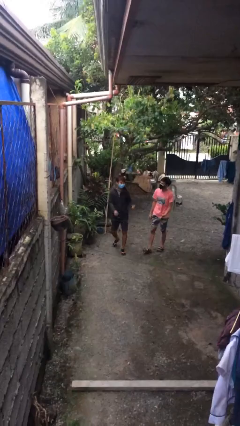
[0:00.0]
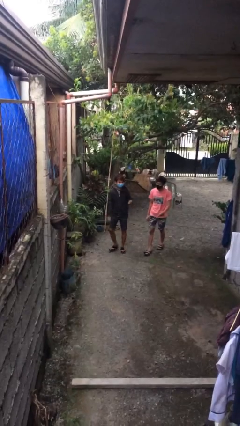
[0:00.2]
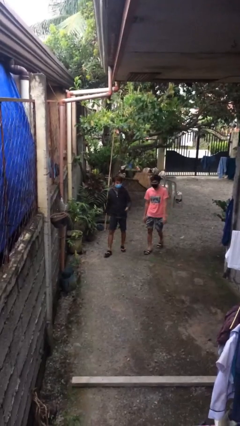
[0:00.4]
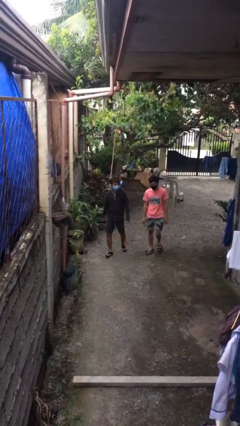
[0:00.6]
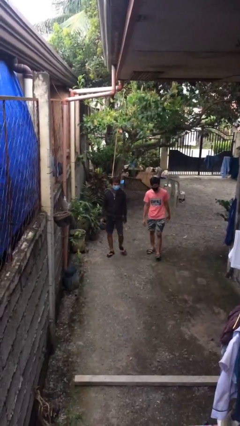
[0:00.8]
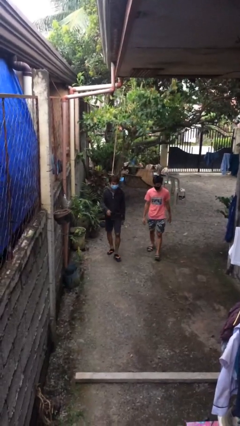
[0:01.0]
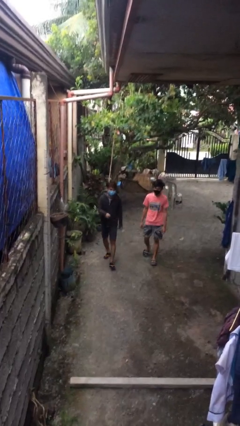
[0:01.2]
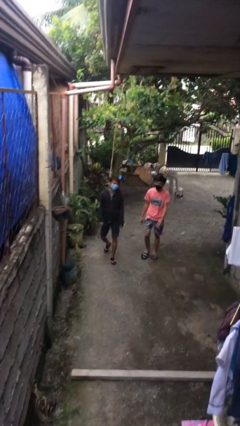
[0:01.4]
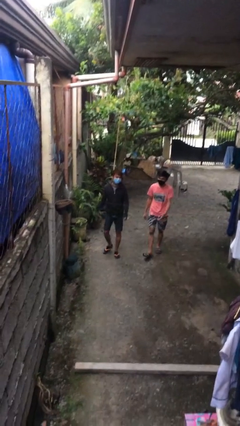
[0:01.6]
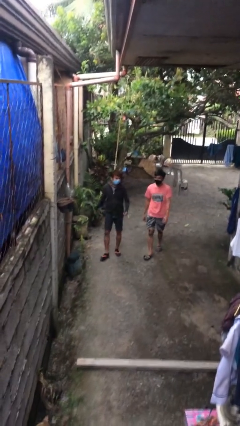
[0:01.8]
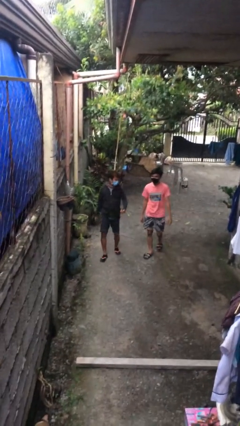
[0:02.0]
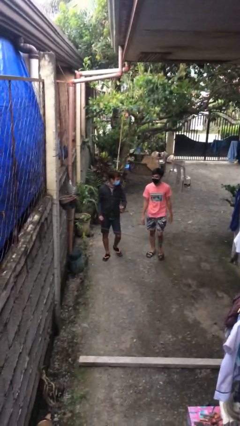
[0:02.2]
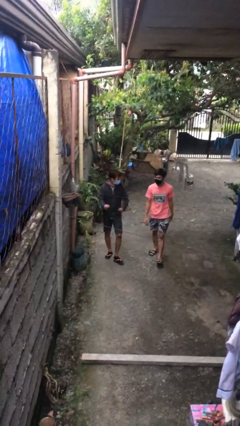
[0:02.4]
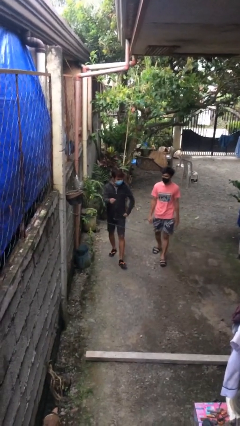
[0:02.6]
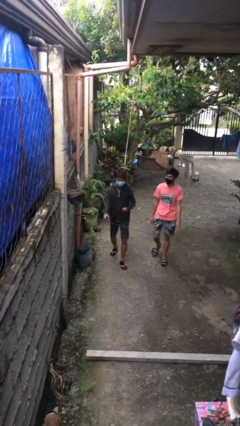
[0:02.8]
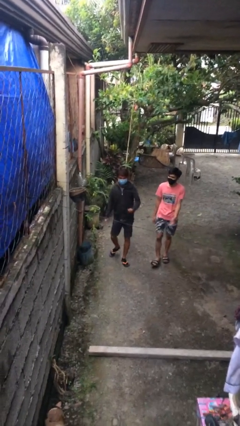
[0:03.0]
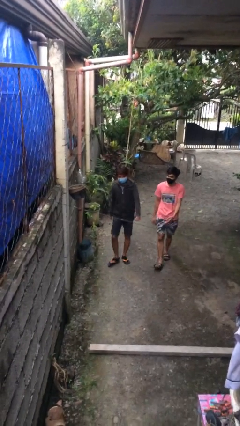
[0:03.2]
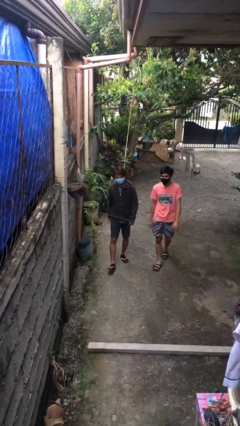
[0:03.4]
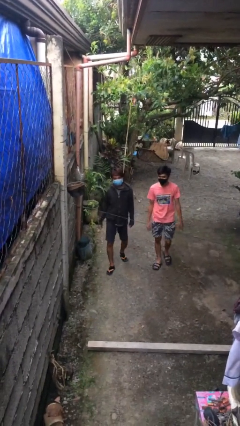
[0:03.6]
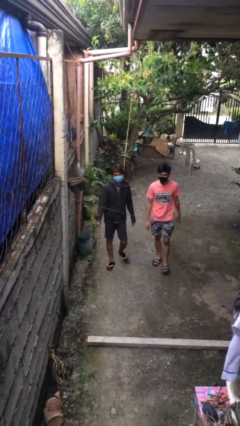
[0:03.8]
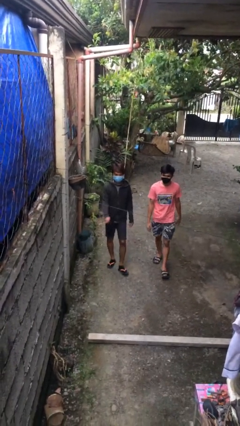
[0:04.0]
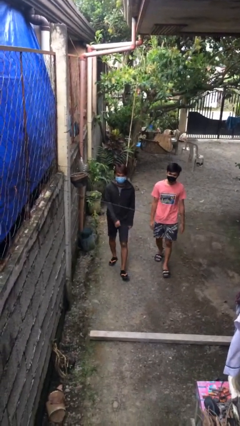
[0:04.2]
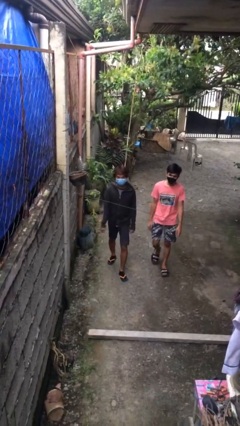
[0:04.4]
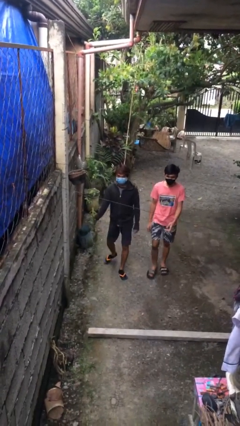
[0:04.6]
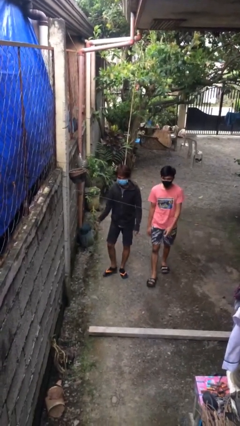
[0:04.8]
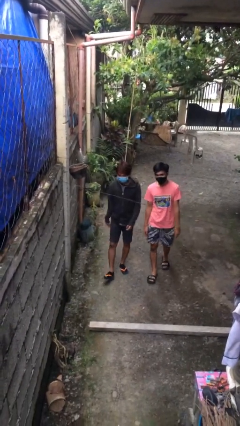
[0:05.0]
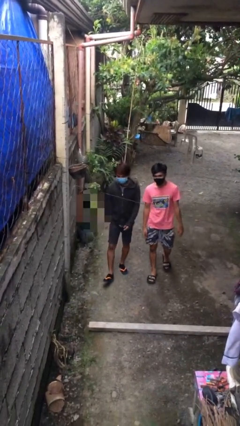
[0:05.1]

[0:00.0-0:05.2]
person talks to person

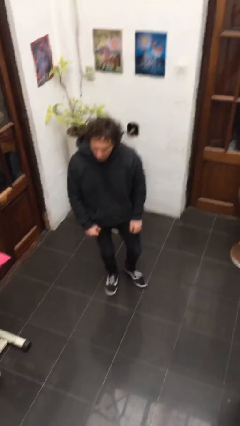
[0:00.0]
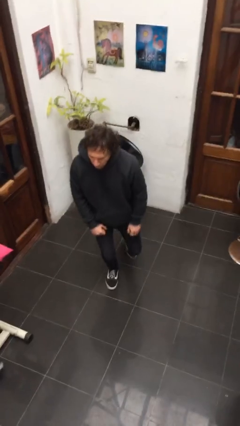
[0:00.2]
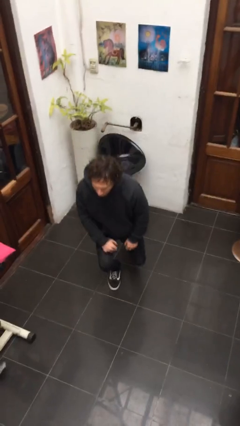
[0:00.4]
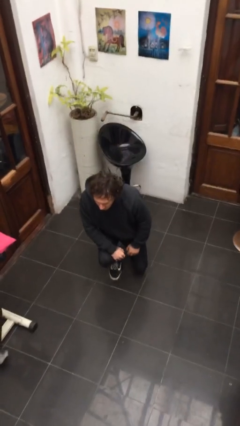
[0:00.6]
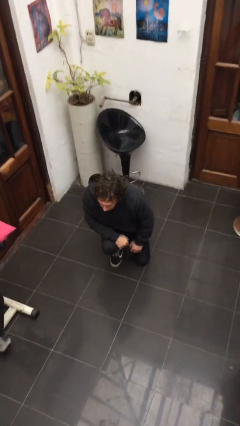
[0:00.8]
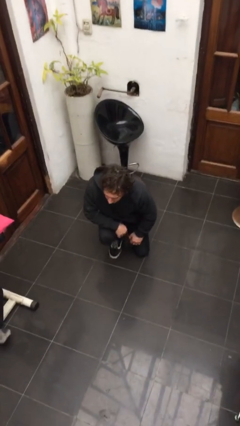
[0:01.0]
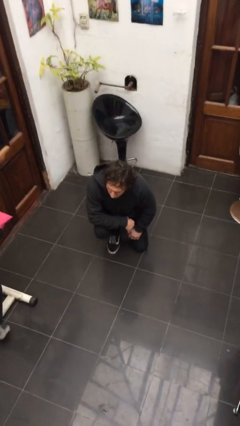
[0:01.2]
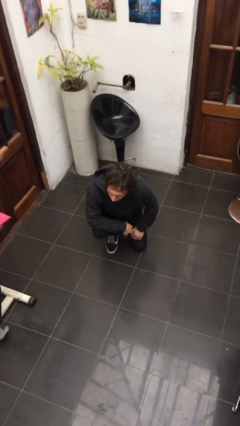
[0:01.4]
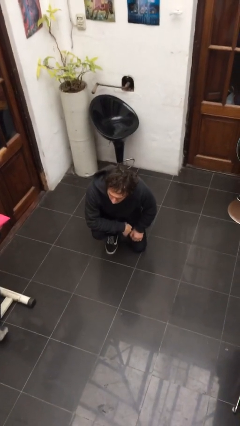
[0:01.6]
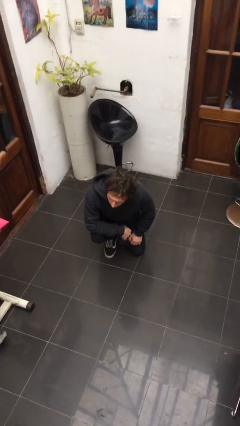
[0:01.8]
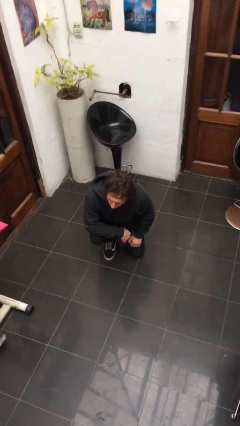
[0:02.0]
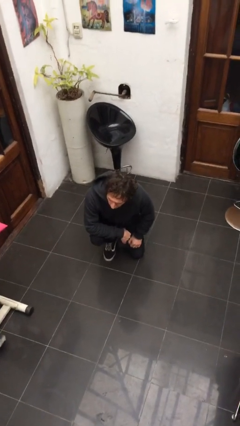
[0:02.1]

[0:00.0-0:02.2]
person kneels

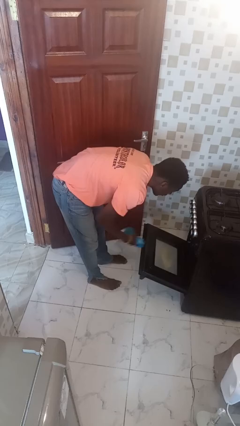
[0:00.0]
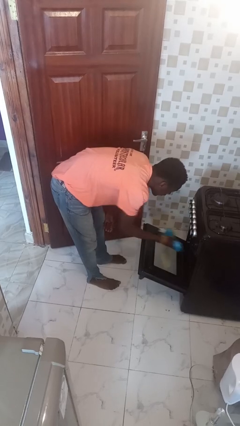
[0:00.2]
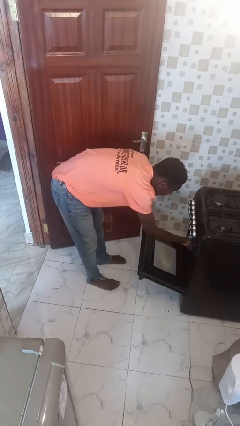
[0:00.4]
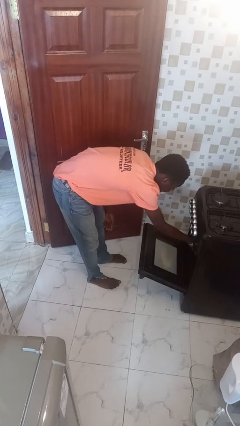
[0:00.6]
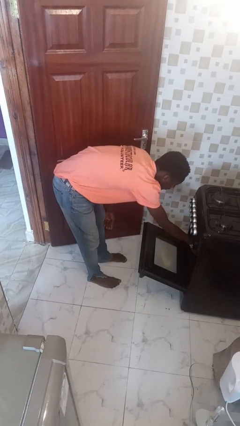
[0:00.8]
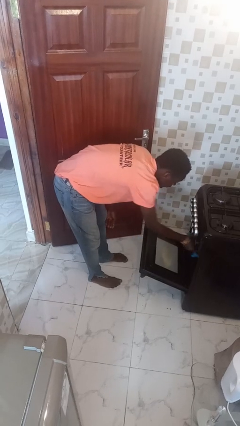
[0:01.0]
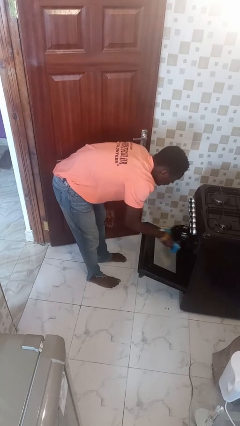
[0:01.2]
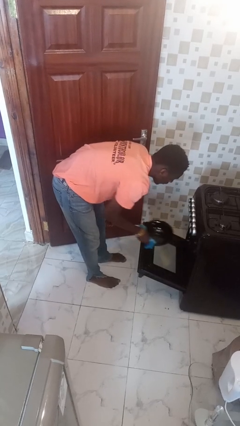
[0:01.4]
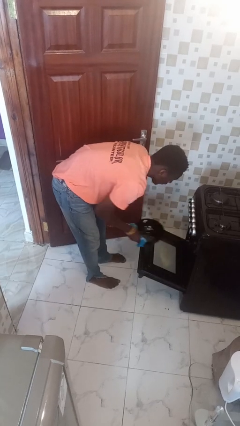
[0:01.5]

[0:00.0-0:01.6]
person takes object from oven

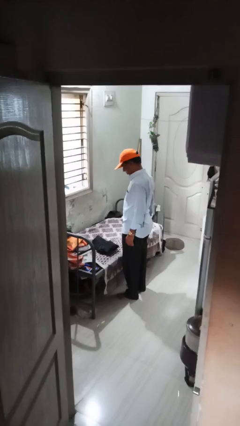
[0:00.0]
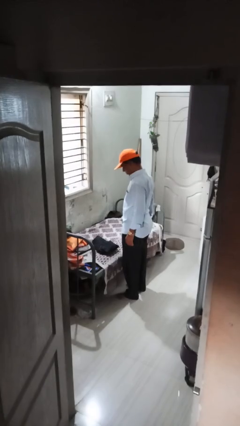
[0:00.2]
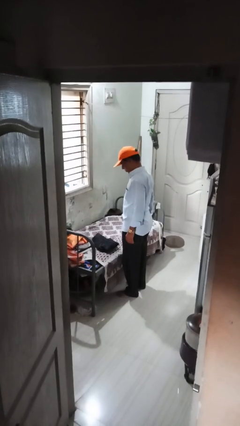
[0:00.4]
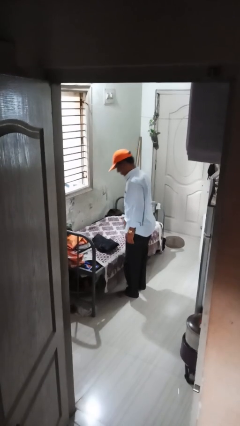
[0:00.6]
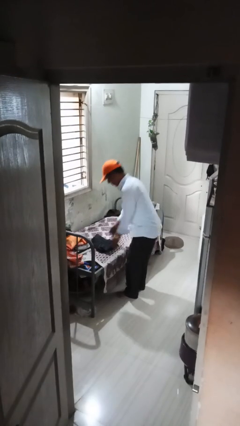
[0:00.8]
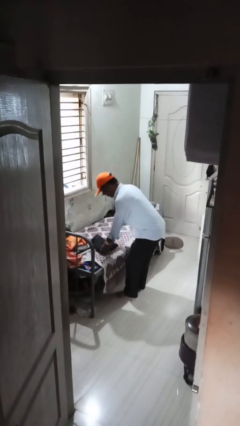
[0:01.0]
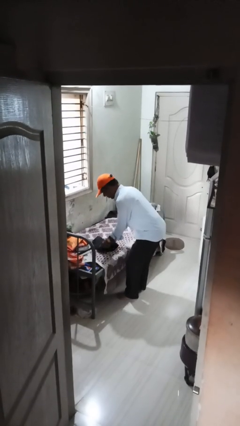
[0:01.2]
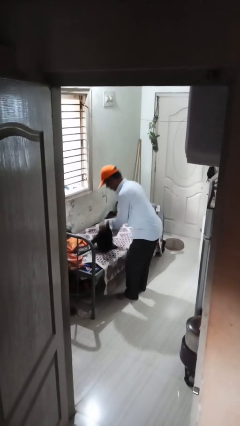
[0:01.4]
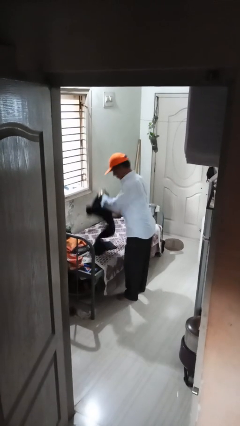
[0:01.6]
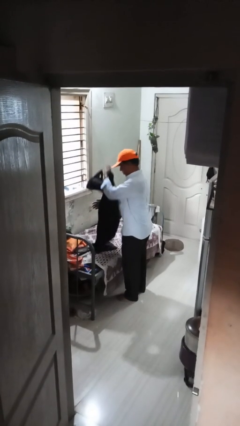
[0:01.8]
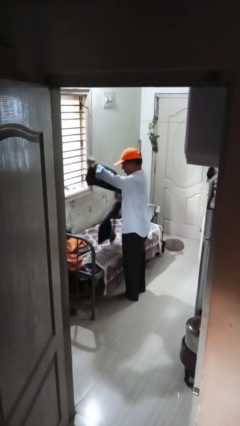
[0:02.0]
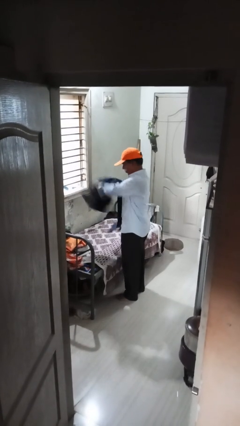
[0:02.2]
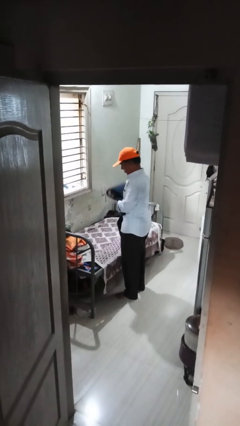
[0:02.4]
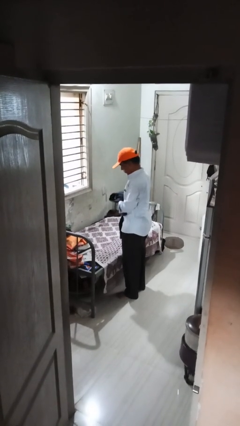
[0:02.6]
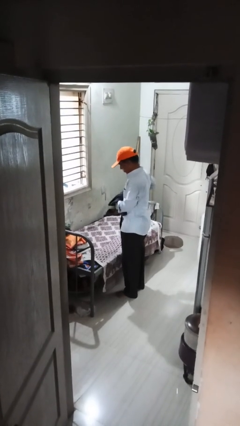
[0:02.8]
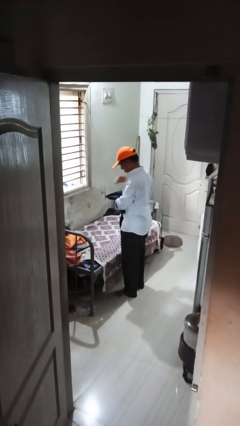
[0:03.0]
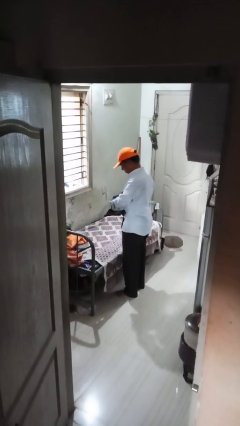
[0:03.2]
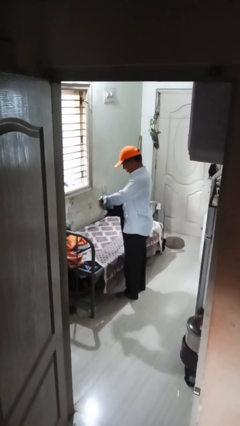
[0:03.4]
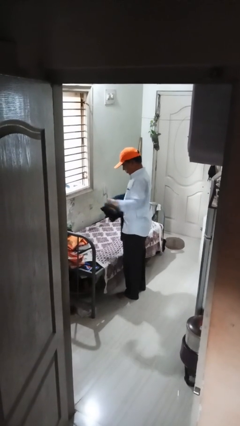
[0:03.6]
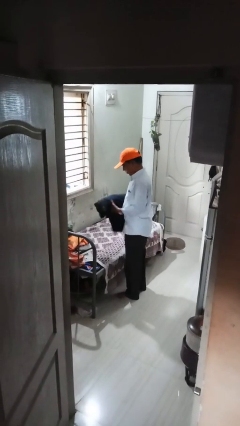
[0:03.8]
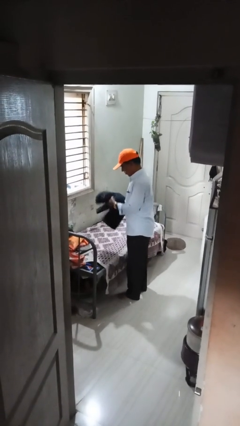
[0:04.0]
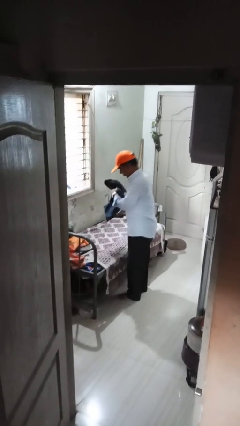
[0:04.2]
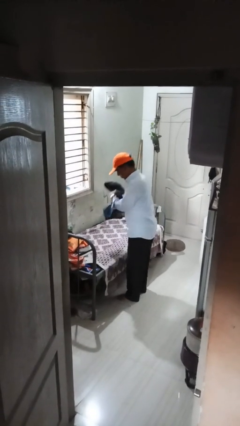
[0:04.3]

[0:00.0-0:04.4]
person folds pants

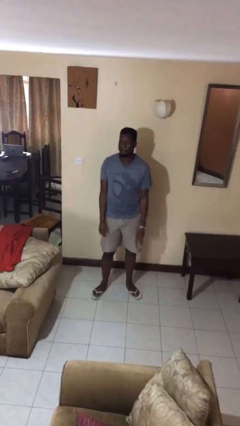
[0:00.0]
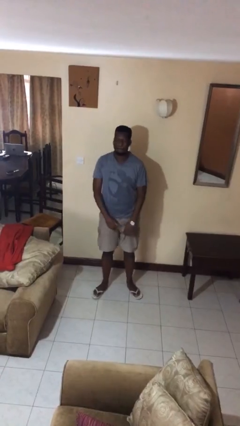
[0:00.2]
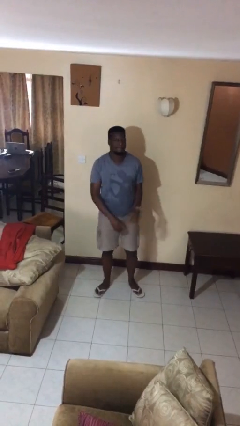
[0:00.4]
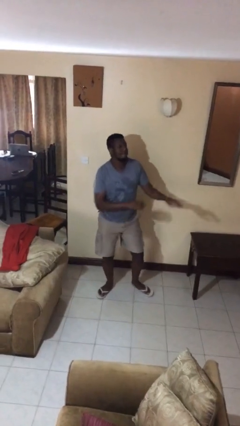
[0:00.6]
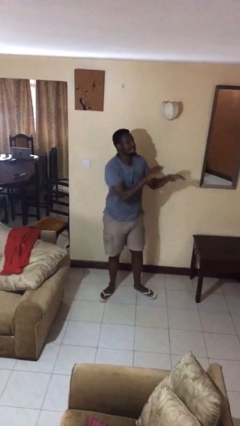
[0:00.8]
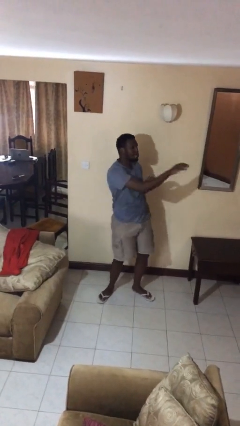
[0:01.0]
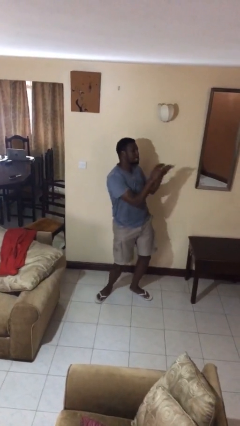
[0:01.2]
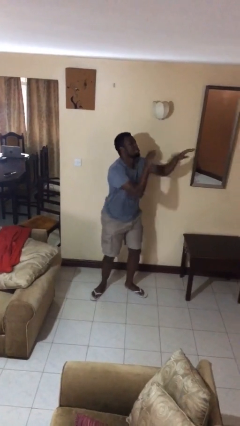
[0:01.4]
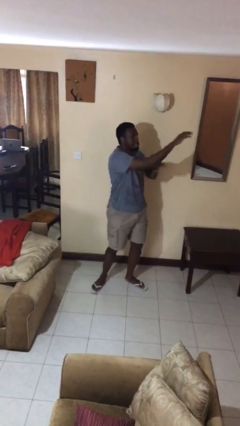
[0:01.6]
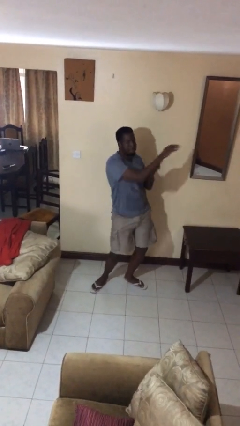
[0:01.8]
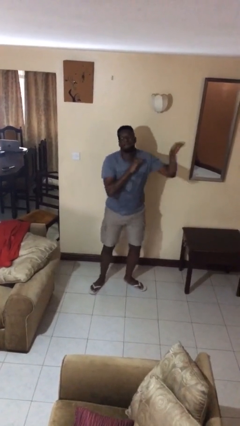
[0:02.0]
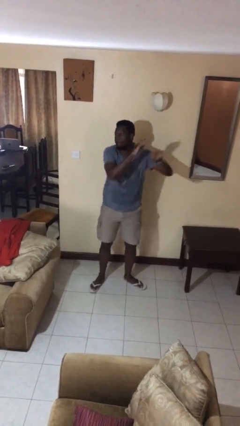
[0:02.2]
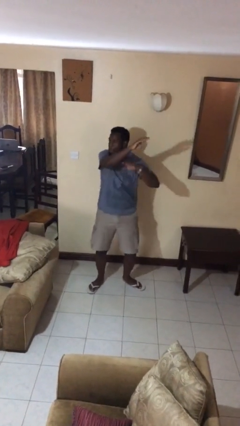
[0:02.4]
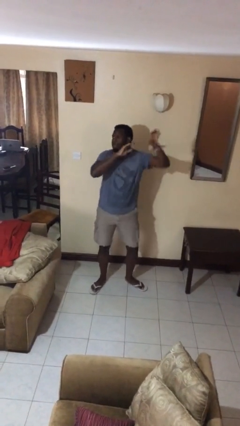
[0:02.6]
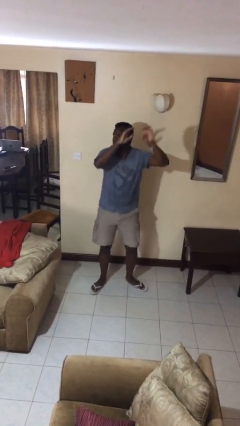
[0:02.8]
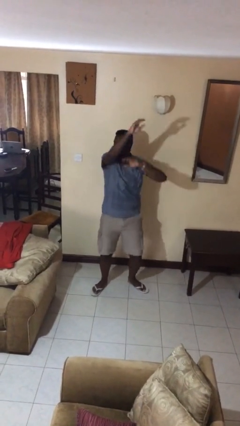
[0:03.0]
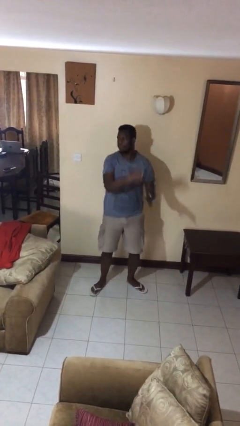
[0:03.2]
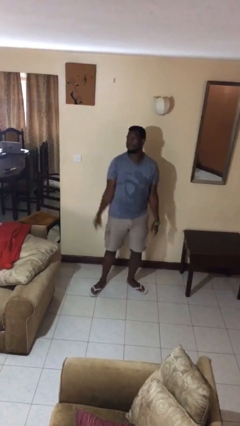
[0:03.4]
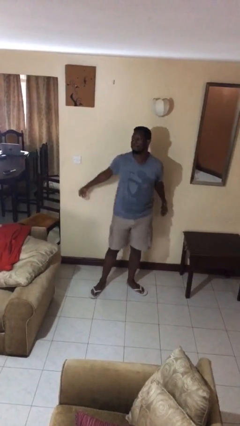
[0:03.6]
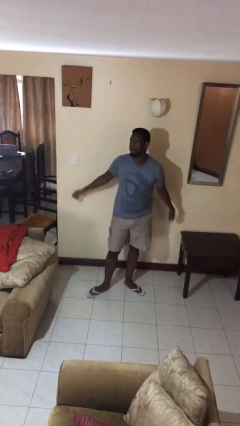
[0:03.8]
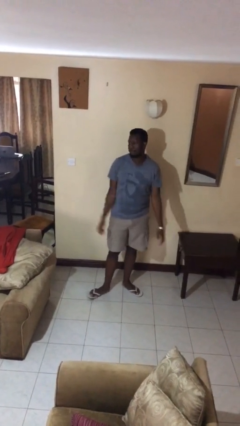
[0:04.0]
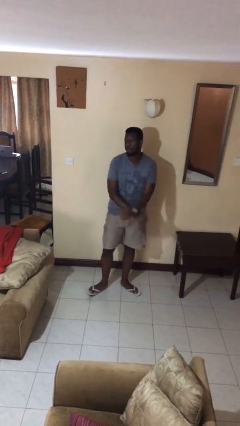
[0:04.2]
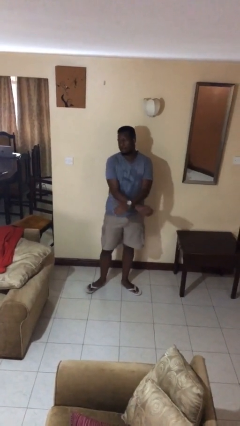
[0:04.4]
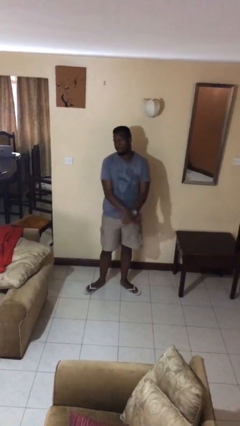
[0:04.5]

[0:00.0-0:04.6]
person dances in place
